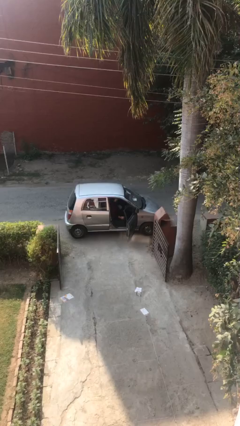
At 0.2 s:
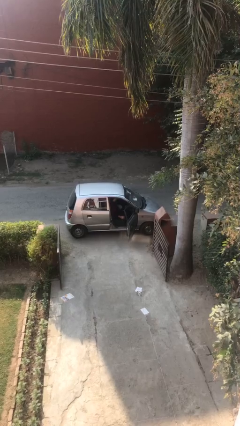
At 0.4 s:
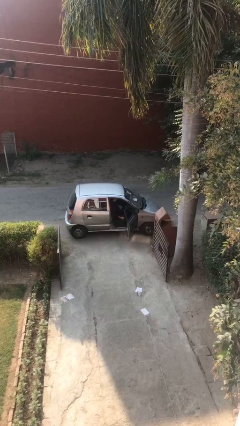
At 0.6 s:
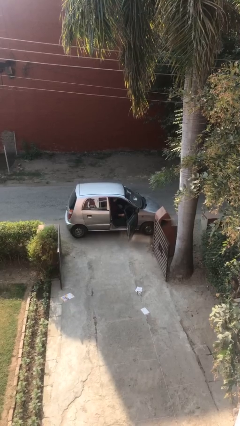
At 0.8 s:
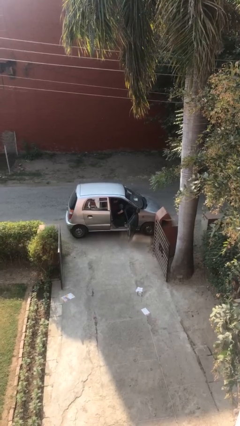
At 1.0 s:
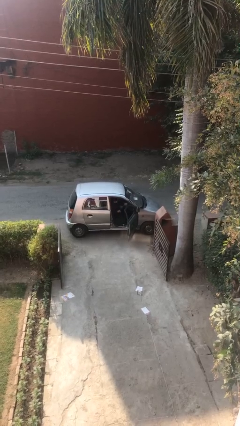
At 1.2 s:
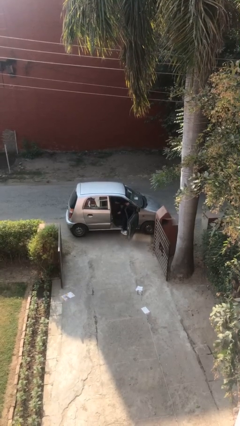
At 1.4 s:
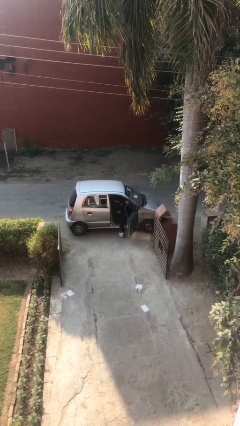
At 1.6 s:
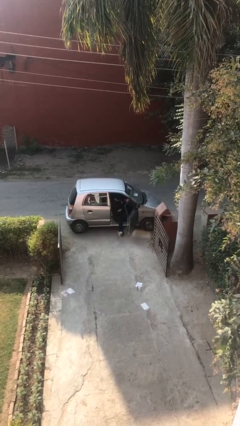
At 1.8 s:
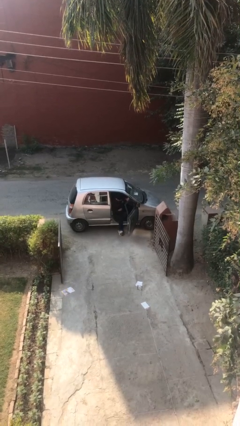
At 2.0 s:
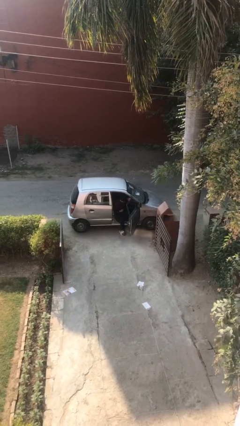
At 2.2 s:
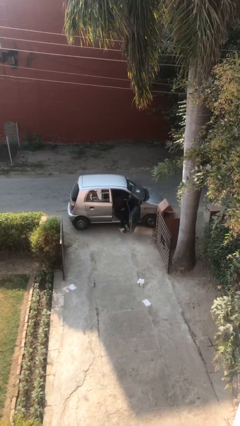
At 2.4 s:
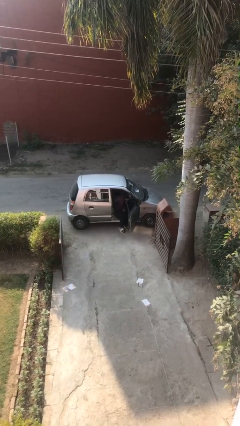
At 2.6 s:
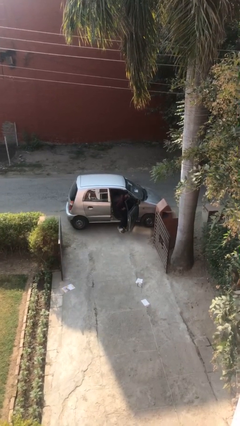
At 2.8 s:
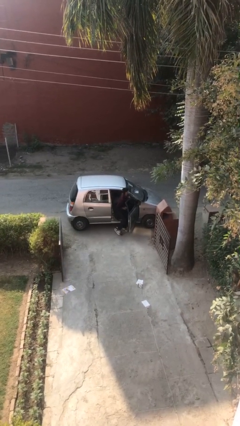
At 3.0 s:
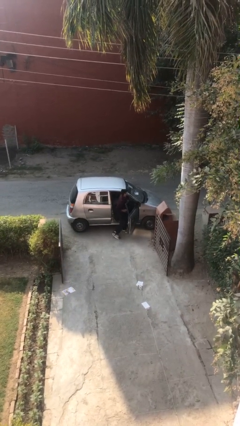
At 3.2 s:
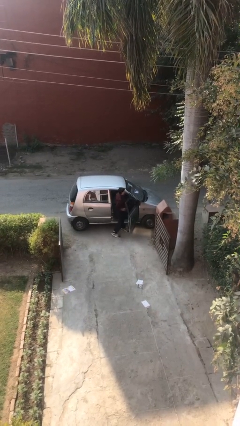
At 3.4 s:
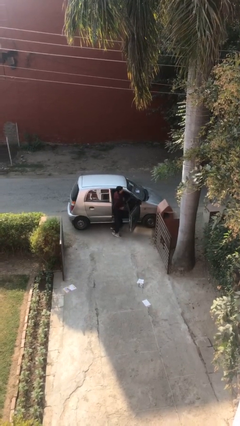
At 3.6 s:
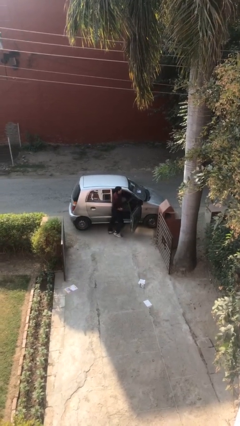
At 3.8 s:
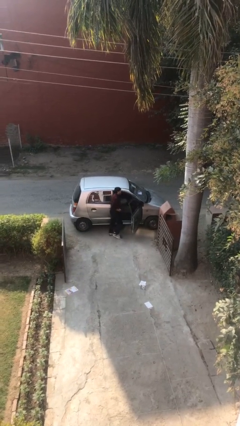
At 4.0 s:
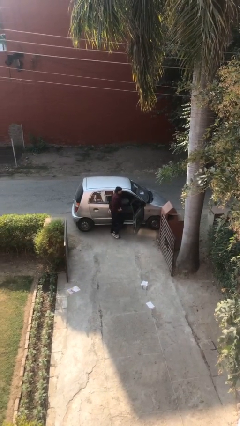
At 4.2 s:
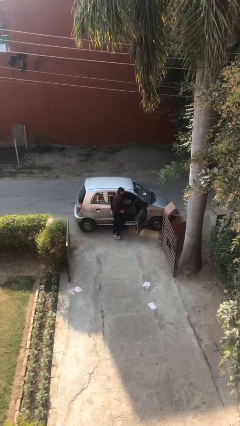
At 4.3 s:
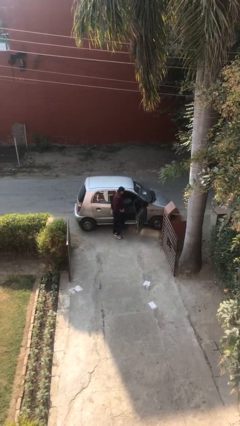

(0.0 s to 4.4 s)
person exits car

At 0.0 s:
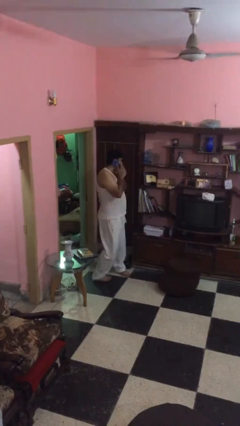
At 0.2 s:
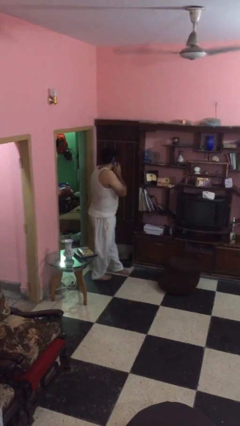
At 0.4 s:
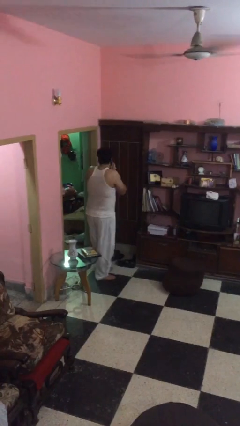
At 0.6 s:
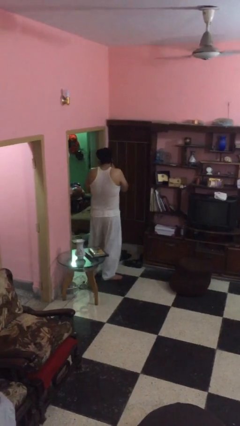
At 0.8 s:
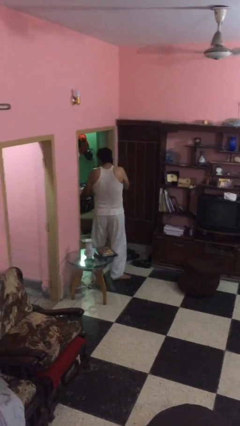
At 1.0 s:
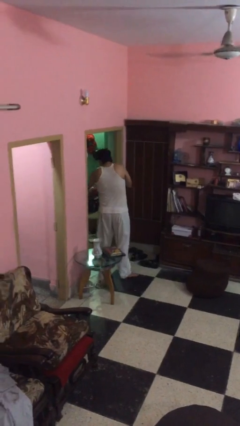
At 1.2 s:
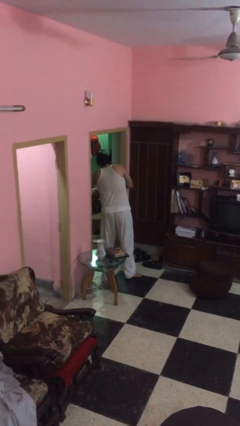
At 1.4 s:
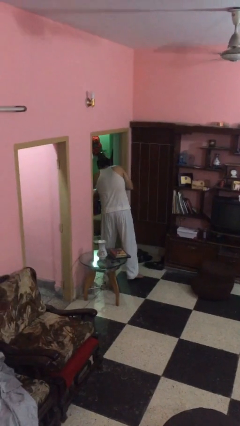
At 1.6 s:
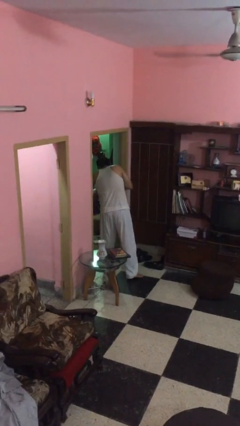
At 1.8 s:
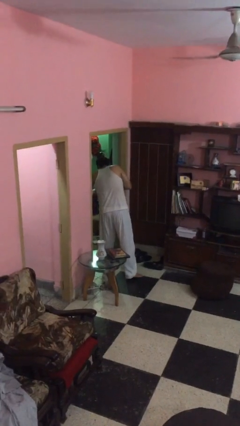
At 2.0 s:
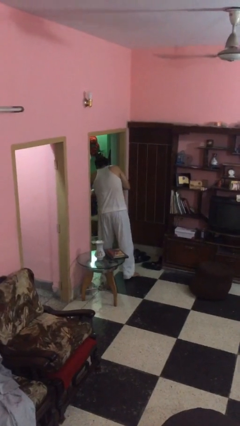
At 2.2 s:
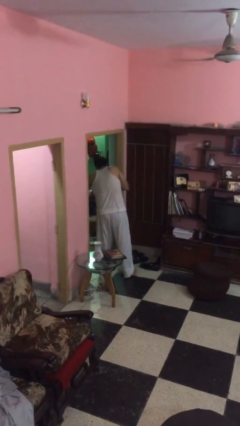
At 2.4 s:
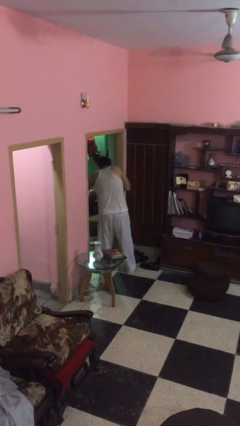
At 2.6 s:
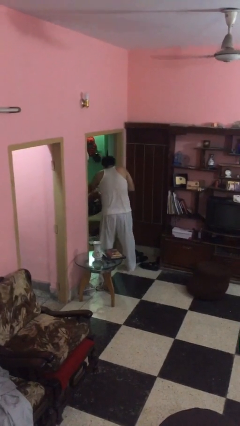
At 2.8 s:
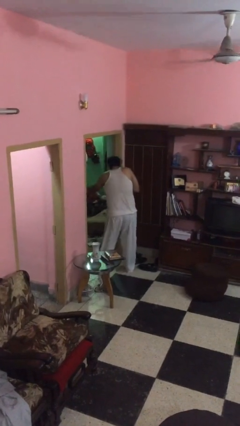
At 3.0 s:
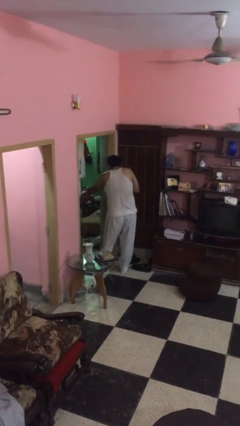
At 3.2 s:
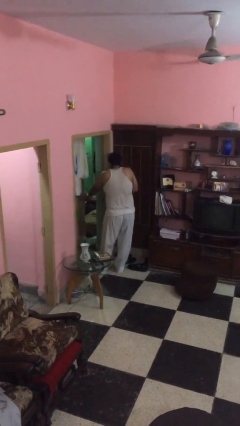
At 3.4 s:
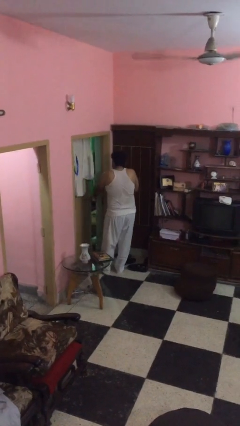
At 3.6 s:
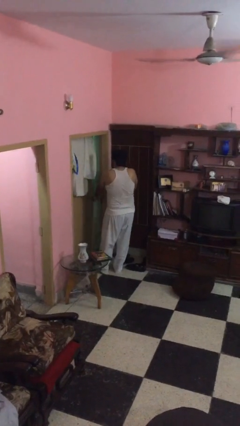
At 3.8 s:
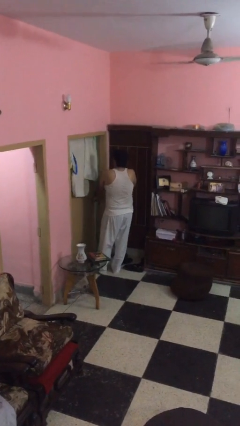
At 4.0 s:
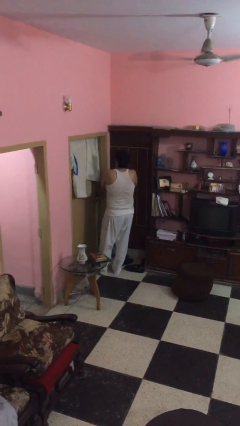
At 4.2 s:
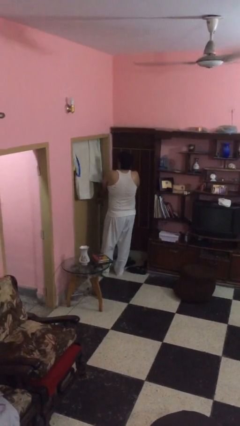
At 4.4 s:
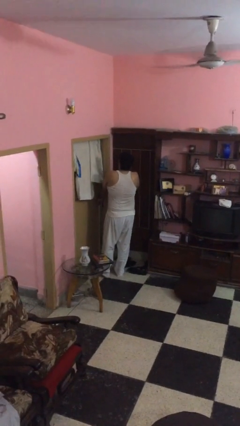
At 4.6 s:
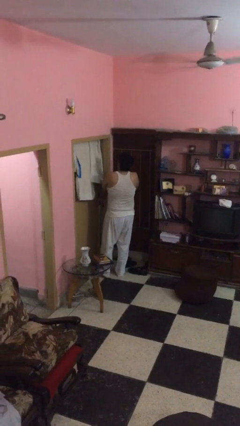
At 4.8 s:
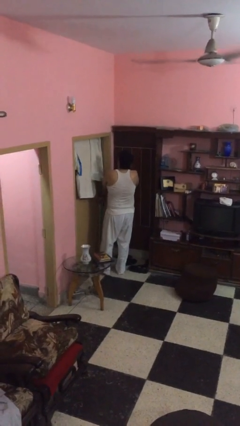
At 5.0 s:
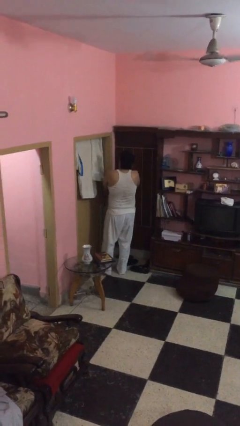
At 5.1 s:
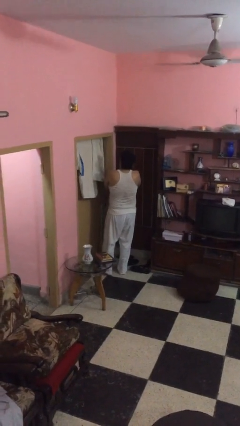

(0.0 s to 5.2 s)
person closes facility door

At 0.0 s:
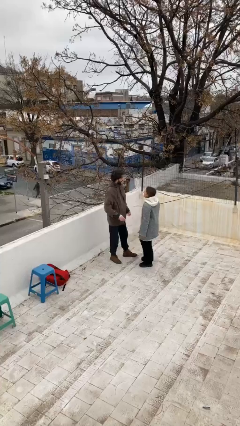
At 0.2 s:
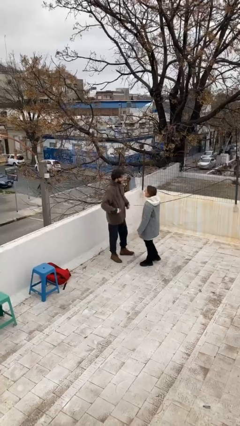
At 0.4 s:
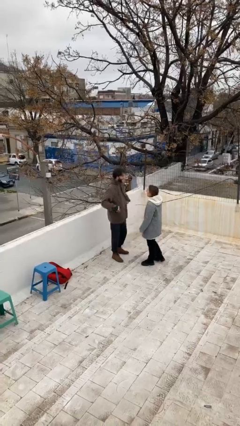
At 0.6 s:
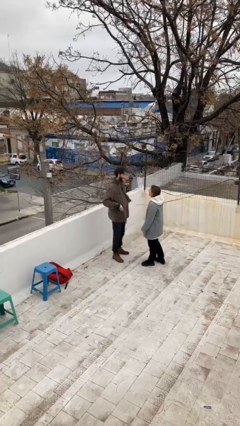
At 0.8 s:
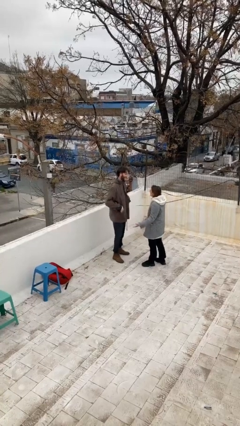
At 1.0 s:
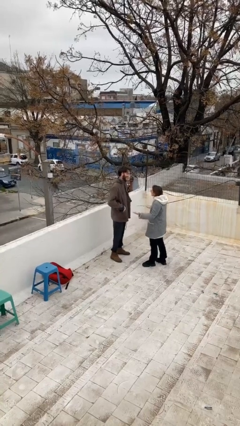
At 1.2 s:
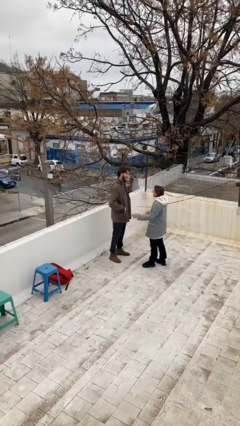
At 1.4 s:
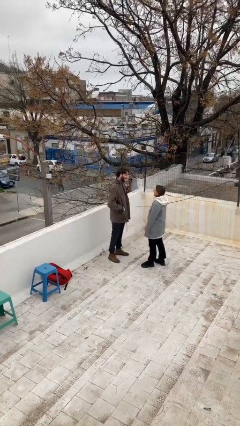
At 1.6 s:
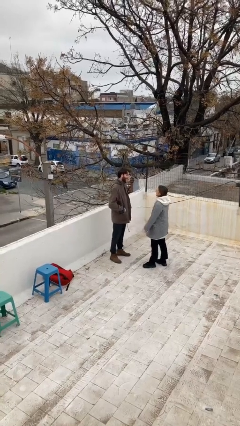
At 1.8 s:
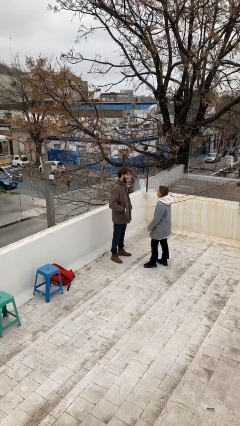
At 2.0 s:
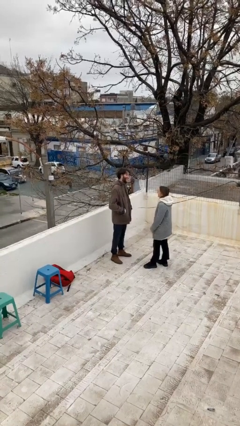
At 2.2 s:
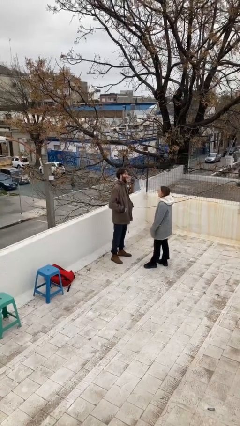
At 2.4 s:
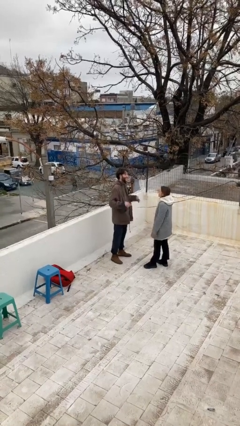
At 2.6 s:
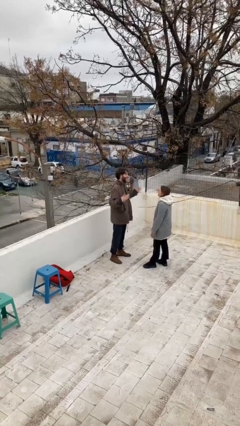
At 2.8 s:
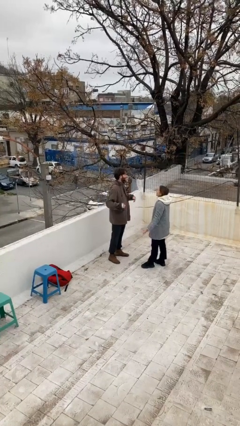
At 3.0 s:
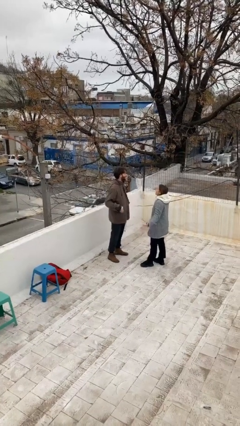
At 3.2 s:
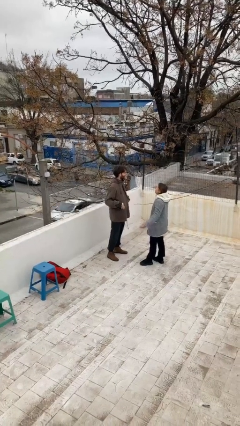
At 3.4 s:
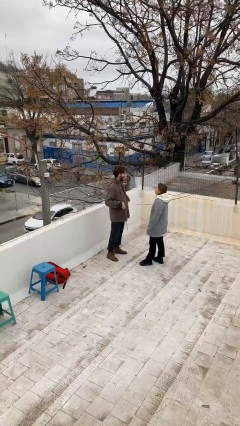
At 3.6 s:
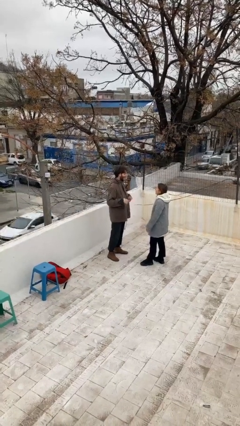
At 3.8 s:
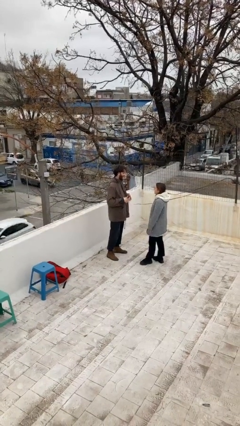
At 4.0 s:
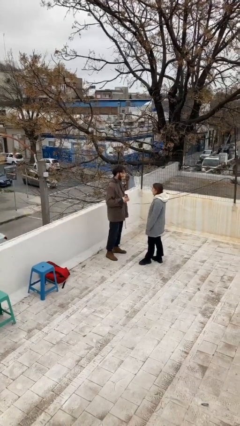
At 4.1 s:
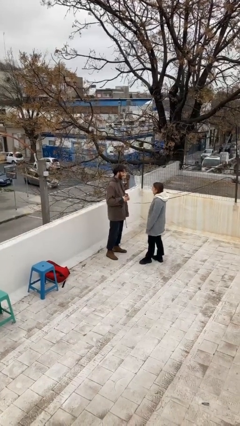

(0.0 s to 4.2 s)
person talks to person

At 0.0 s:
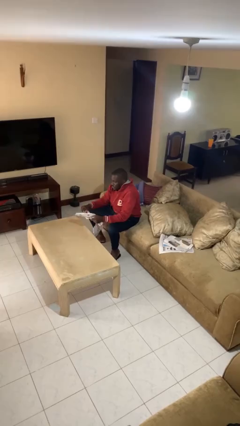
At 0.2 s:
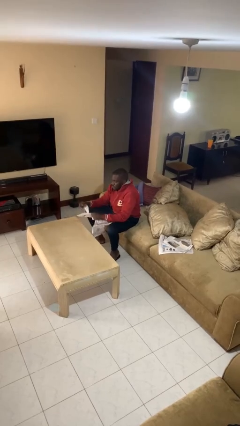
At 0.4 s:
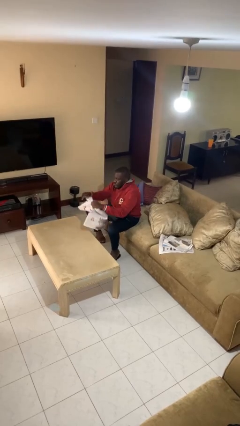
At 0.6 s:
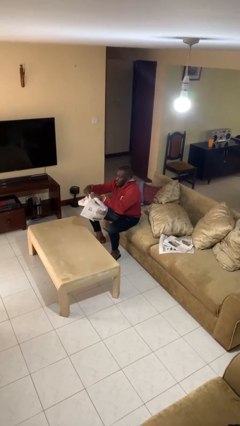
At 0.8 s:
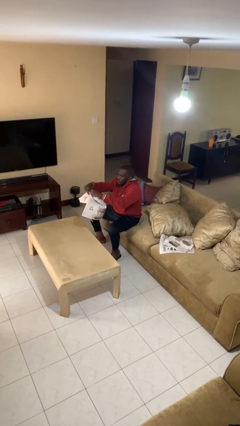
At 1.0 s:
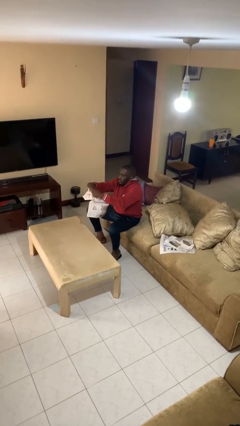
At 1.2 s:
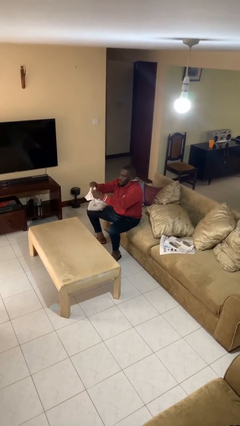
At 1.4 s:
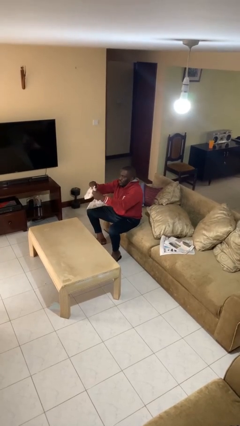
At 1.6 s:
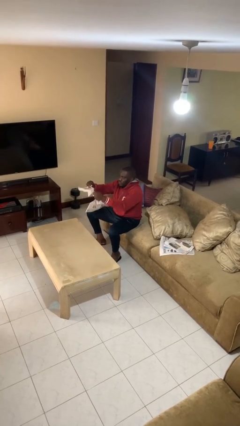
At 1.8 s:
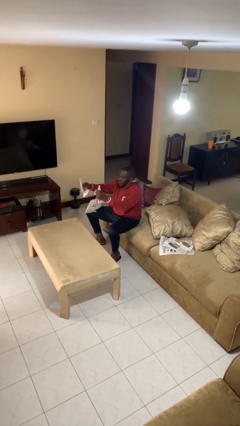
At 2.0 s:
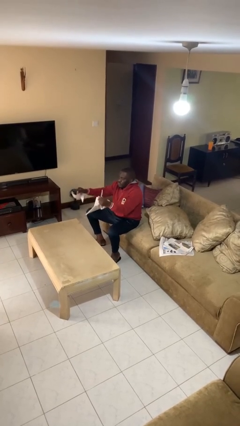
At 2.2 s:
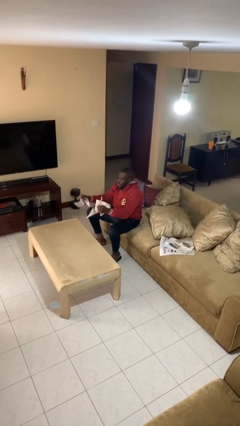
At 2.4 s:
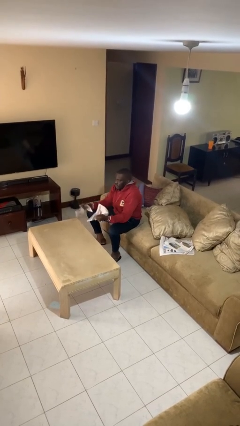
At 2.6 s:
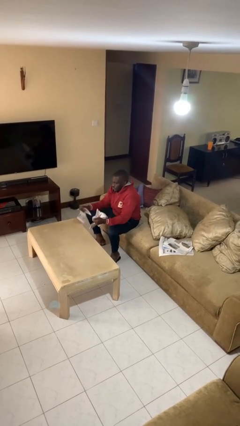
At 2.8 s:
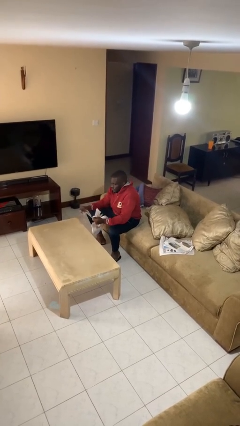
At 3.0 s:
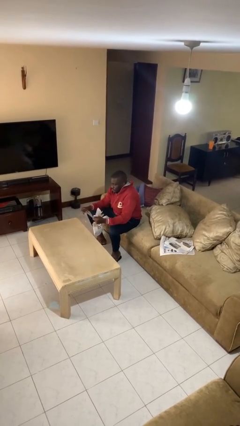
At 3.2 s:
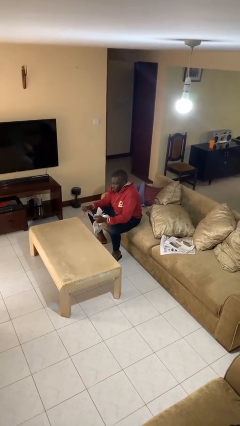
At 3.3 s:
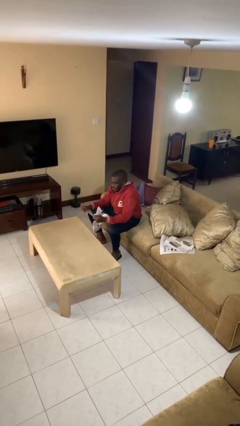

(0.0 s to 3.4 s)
person tears paper

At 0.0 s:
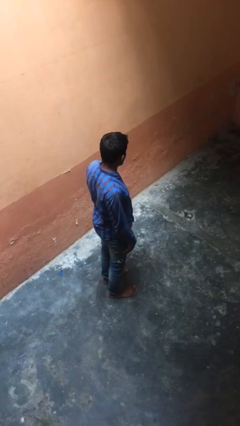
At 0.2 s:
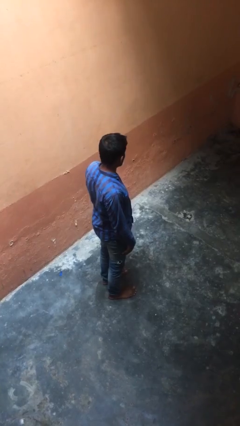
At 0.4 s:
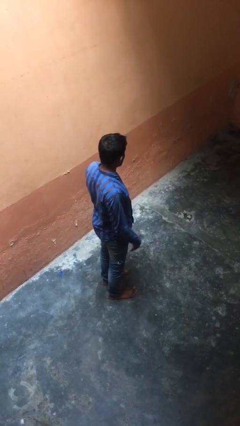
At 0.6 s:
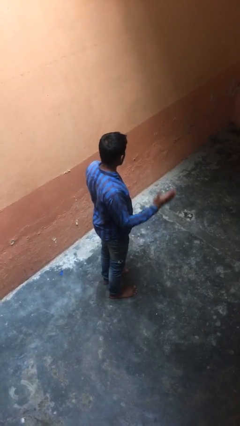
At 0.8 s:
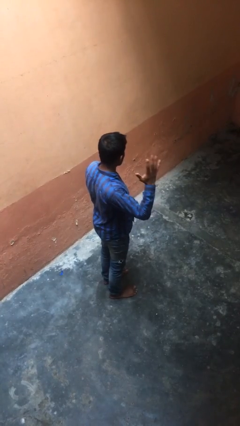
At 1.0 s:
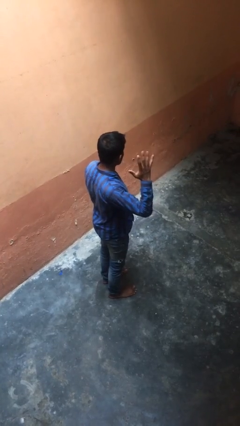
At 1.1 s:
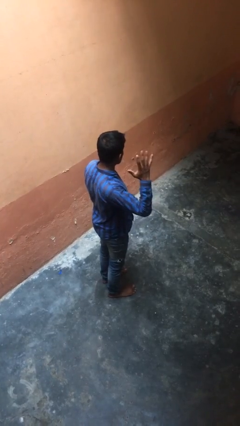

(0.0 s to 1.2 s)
person gestures number five
